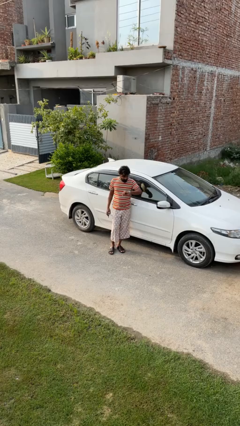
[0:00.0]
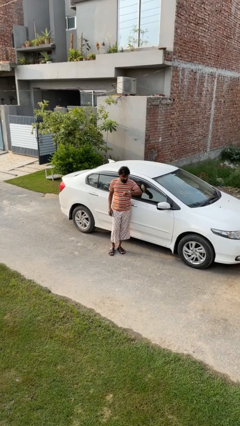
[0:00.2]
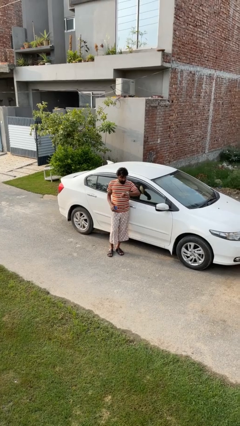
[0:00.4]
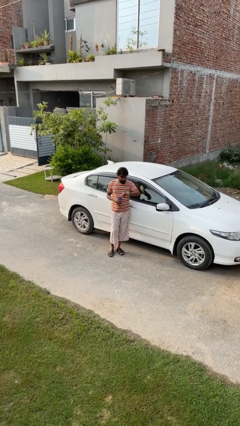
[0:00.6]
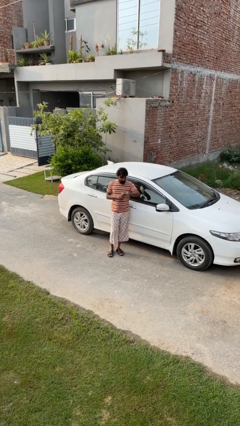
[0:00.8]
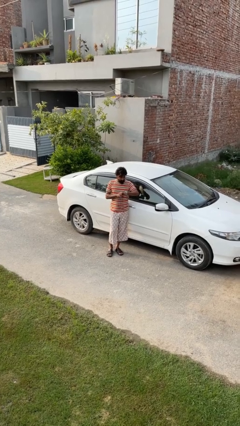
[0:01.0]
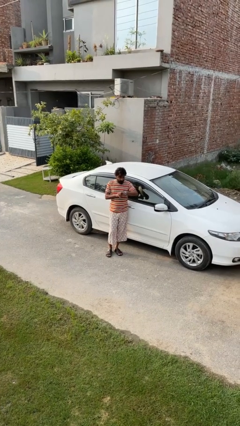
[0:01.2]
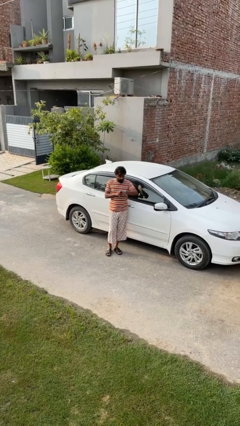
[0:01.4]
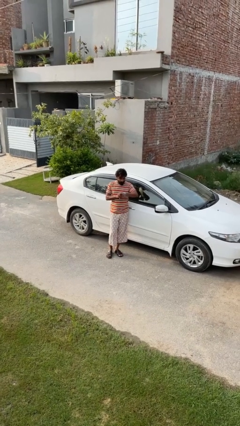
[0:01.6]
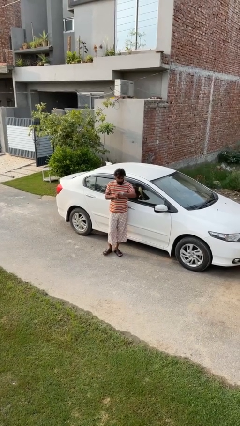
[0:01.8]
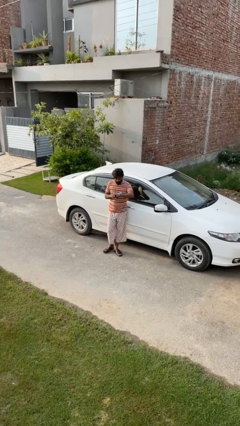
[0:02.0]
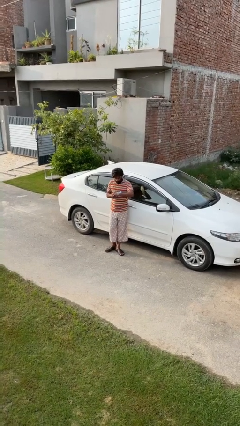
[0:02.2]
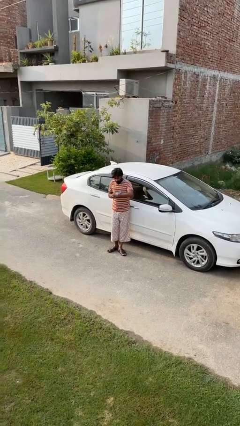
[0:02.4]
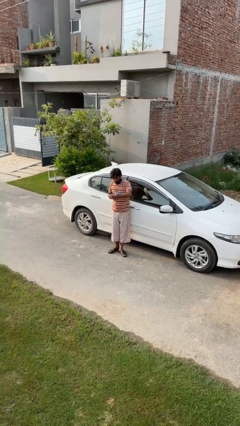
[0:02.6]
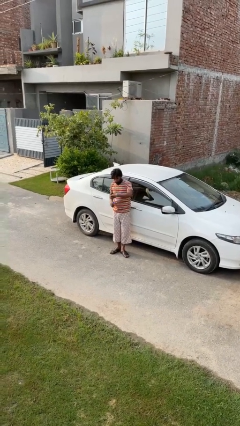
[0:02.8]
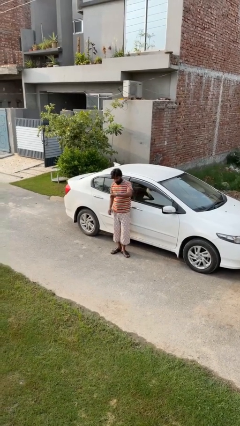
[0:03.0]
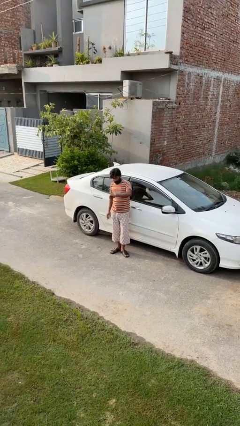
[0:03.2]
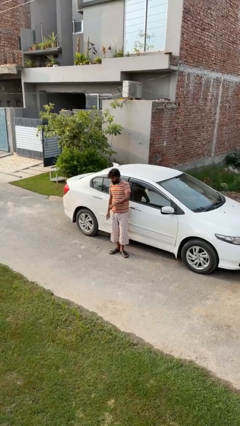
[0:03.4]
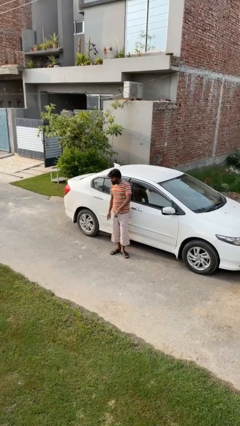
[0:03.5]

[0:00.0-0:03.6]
person looks at wristwatch

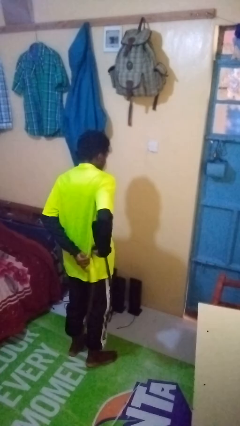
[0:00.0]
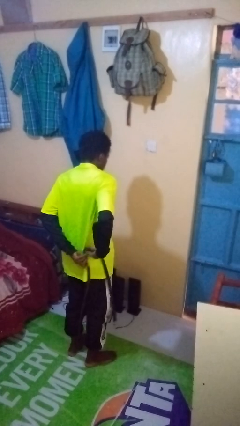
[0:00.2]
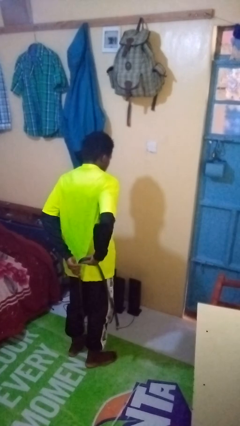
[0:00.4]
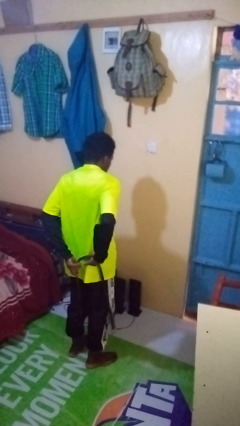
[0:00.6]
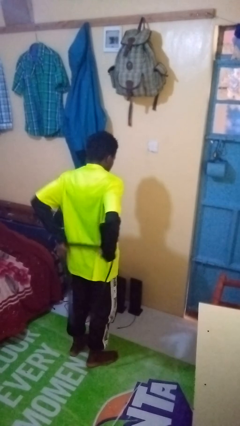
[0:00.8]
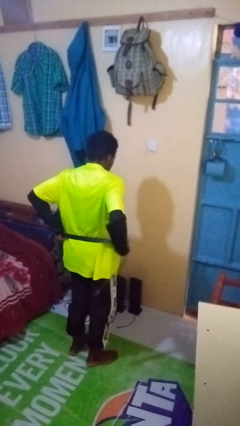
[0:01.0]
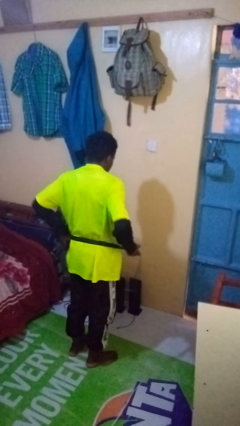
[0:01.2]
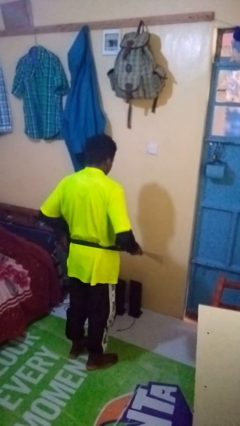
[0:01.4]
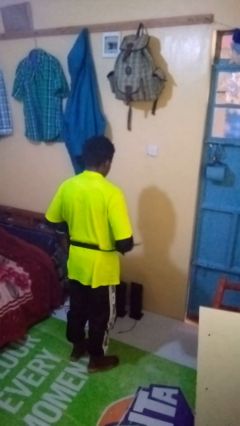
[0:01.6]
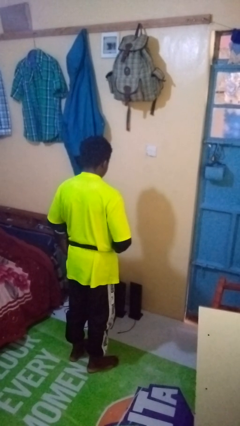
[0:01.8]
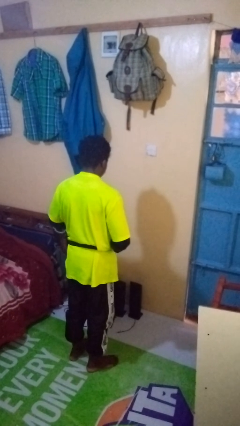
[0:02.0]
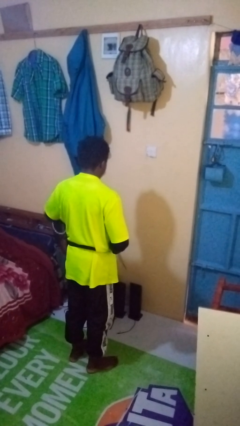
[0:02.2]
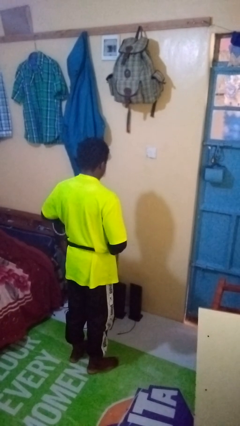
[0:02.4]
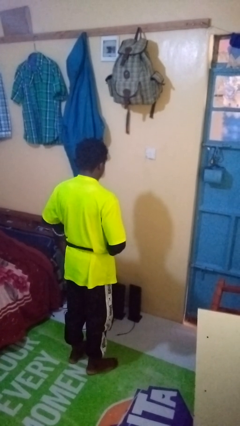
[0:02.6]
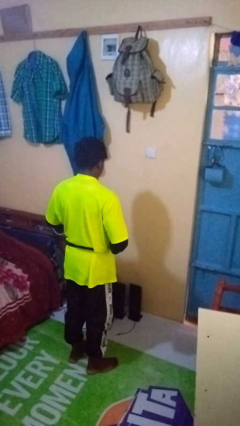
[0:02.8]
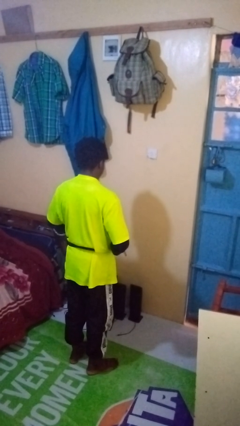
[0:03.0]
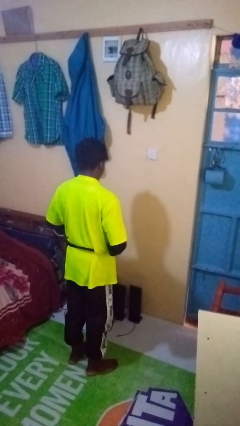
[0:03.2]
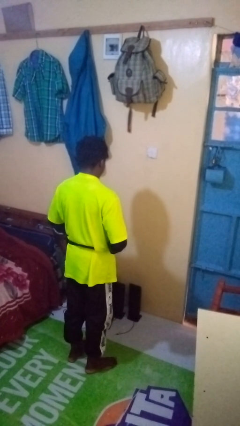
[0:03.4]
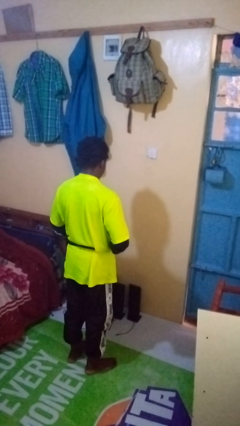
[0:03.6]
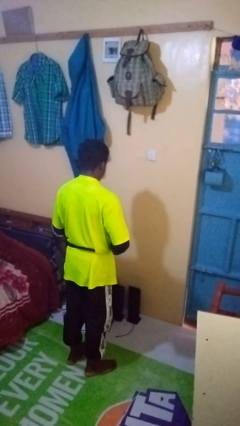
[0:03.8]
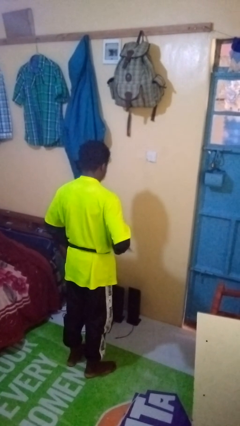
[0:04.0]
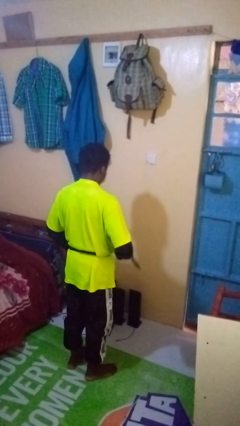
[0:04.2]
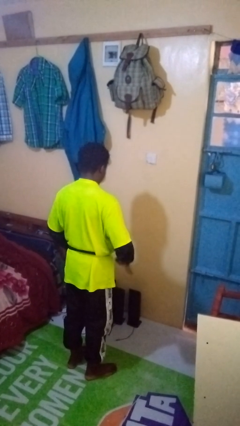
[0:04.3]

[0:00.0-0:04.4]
person puts on belt

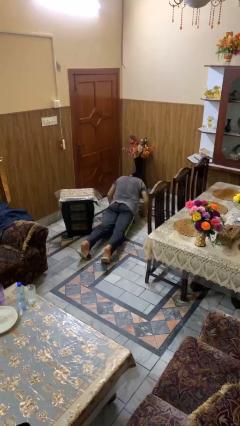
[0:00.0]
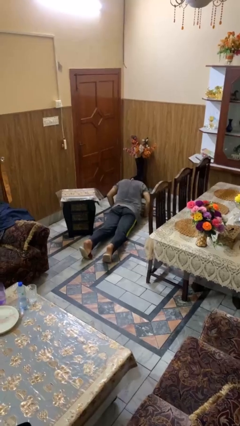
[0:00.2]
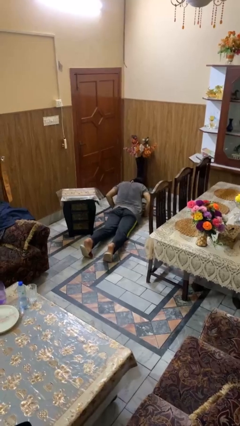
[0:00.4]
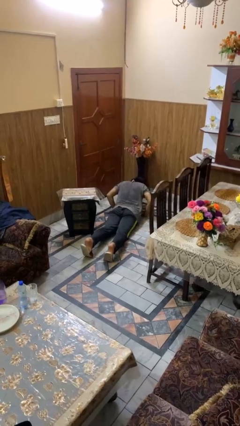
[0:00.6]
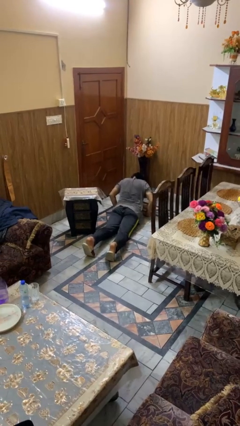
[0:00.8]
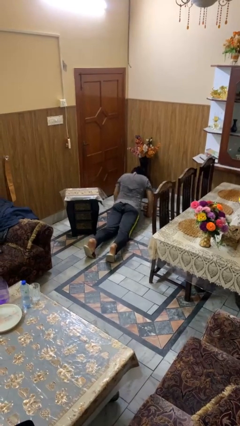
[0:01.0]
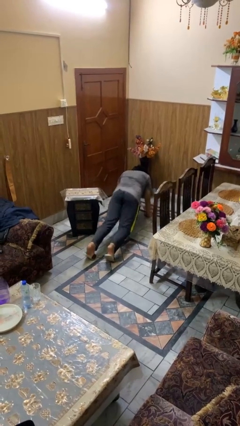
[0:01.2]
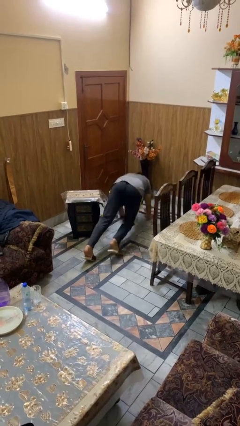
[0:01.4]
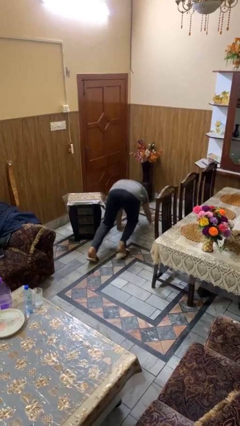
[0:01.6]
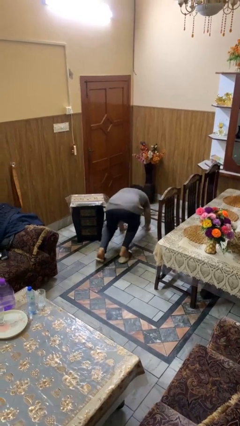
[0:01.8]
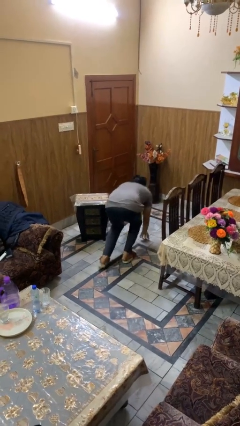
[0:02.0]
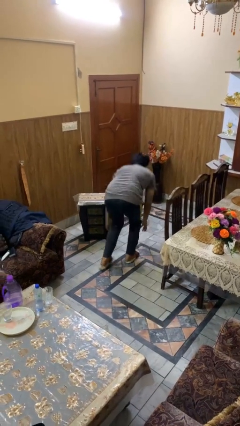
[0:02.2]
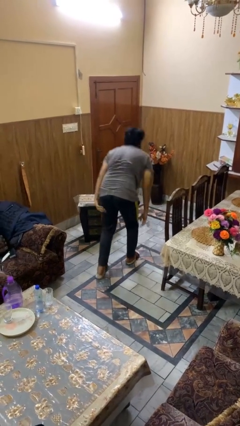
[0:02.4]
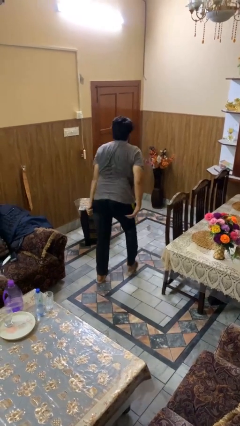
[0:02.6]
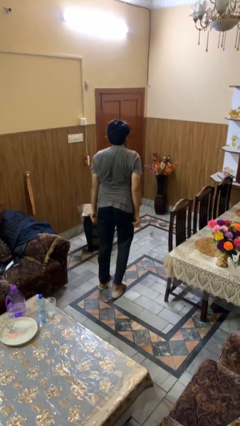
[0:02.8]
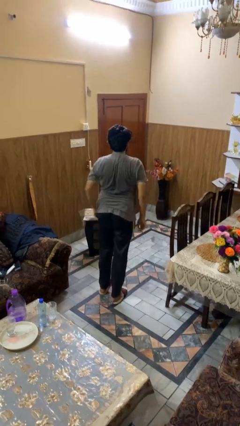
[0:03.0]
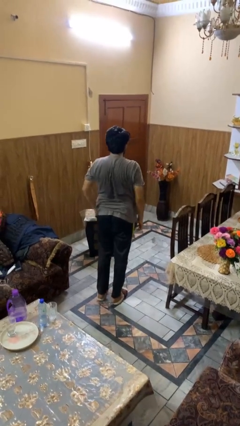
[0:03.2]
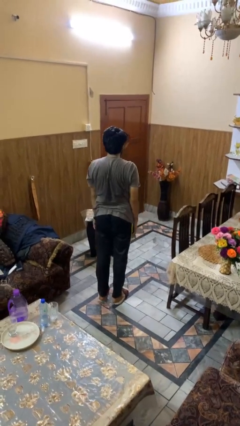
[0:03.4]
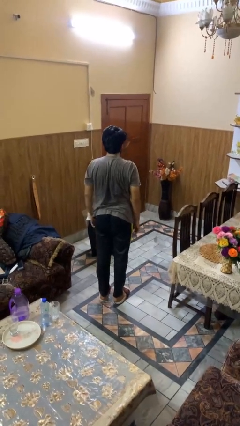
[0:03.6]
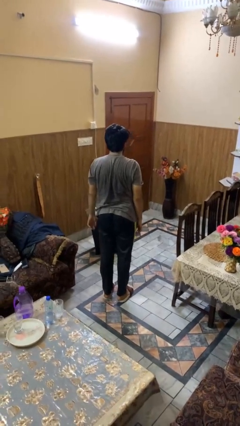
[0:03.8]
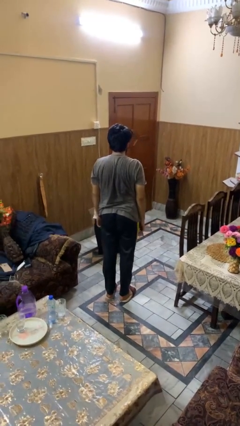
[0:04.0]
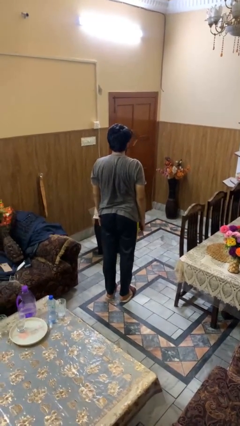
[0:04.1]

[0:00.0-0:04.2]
person stands up from floor

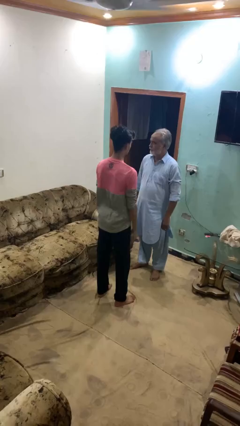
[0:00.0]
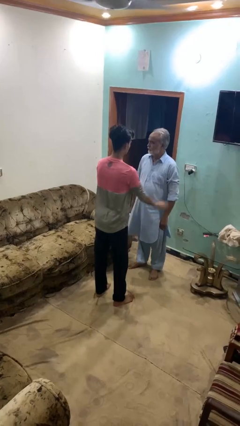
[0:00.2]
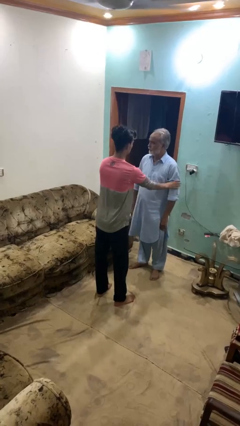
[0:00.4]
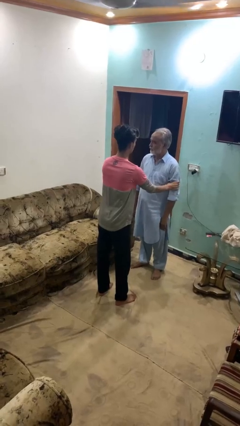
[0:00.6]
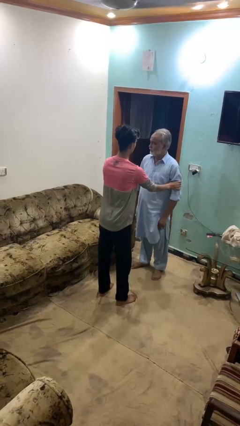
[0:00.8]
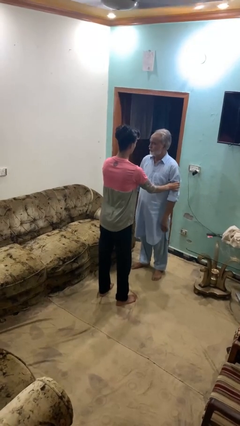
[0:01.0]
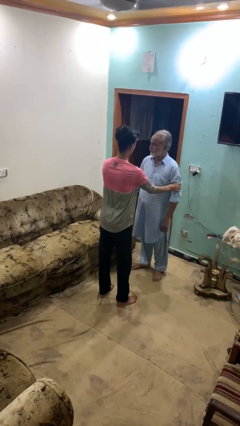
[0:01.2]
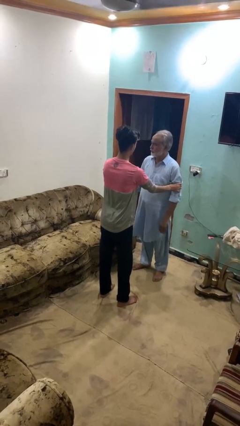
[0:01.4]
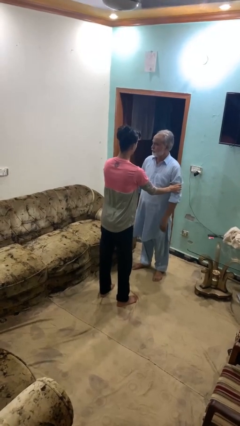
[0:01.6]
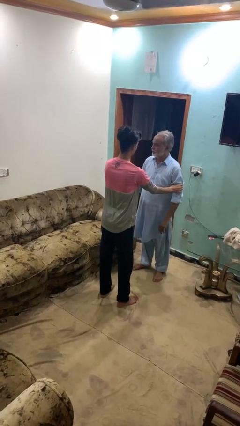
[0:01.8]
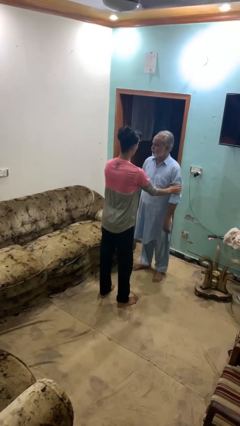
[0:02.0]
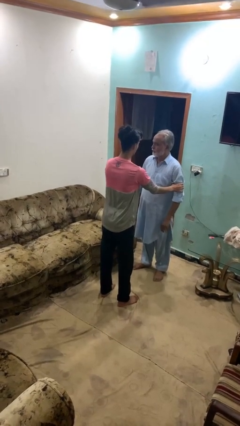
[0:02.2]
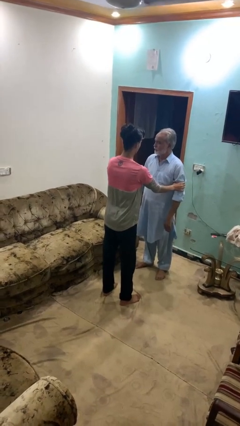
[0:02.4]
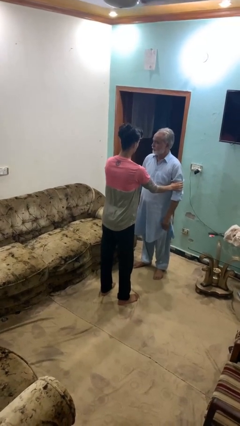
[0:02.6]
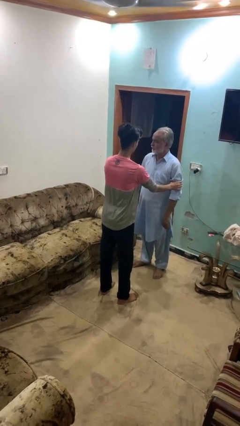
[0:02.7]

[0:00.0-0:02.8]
person grabs person by bicep

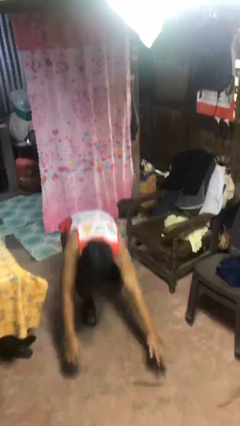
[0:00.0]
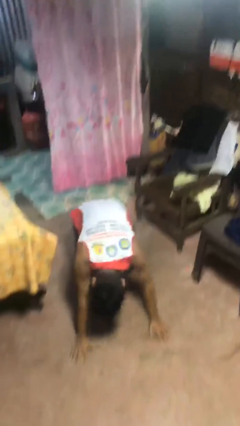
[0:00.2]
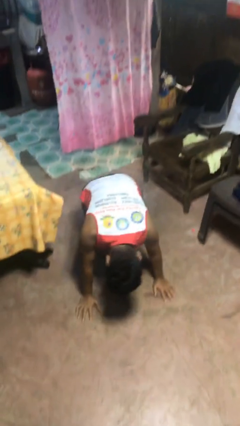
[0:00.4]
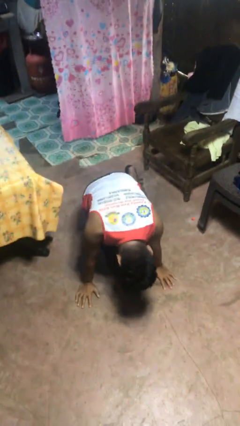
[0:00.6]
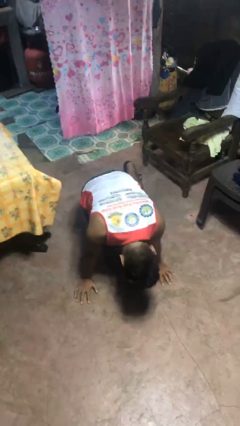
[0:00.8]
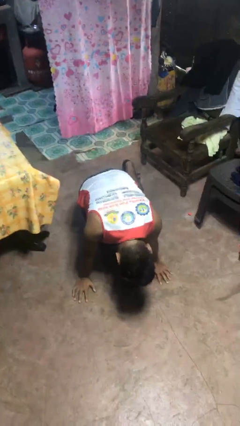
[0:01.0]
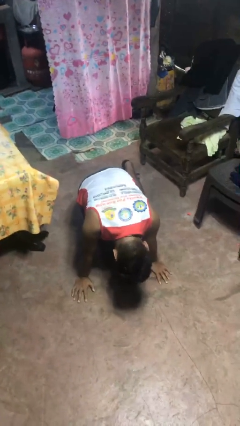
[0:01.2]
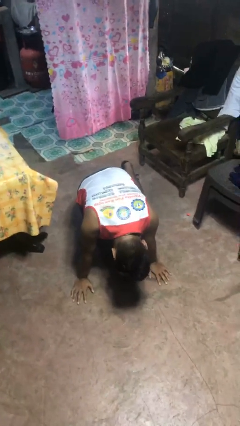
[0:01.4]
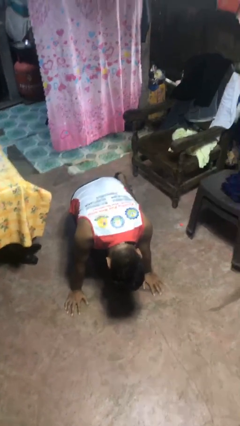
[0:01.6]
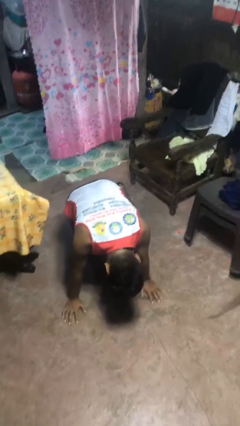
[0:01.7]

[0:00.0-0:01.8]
person lies down on floor

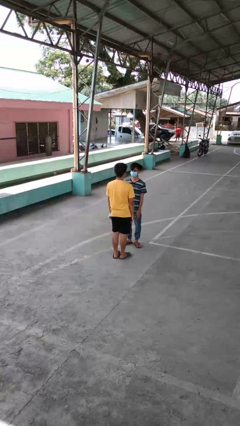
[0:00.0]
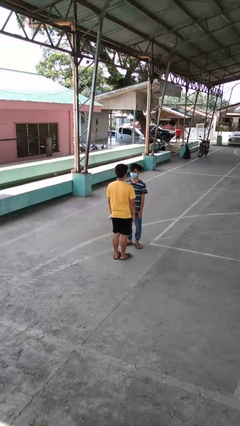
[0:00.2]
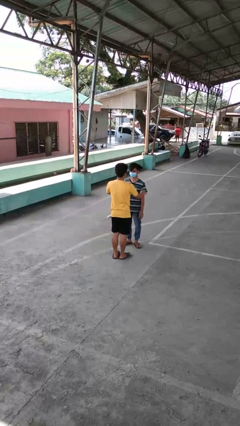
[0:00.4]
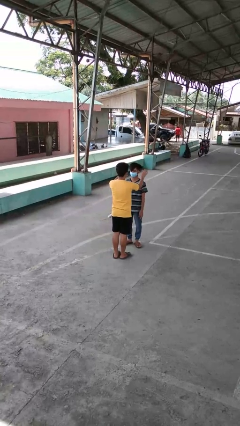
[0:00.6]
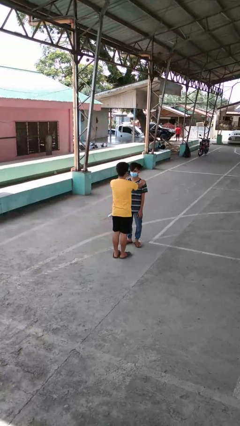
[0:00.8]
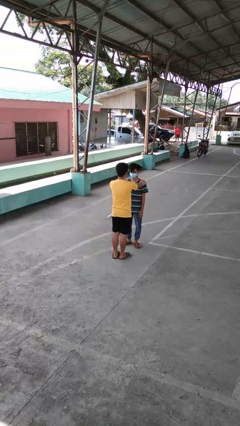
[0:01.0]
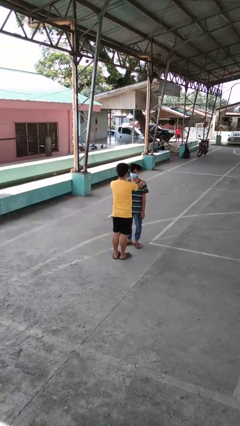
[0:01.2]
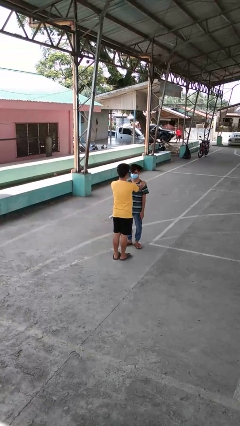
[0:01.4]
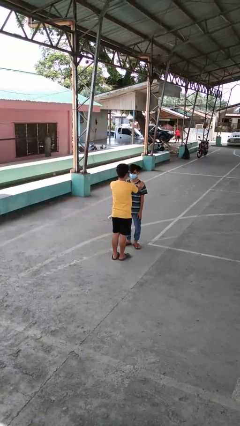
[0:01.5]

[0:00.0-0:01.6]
person grabs person by shoulder
